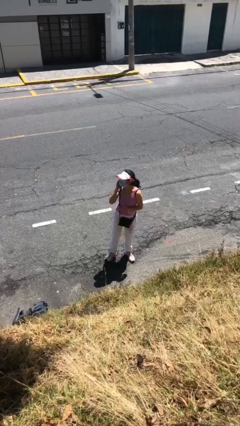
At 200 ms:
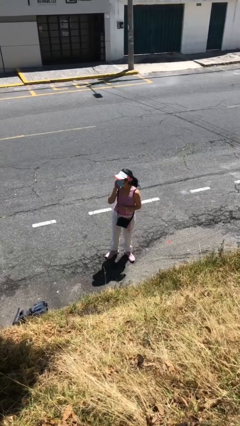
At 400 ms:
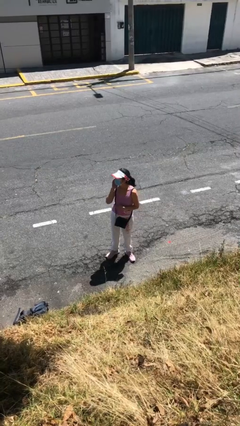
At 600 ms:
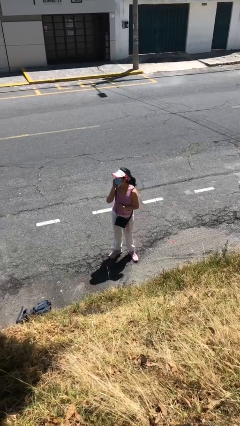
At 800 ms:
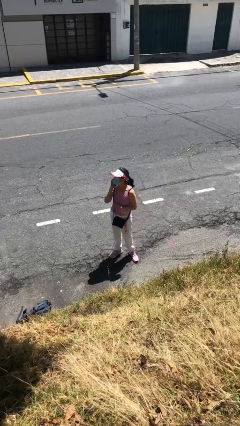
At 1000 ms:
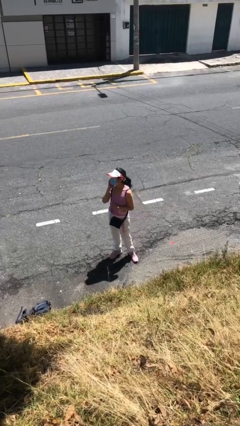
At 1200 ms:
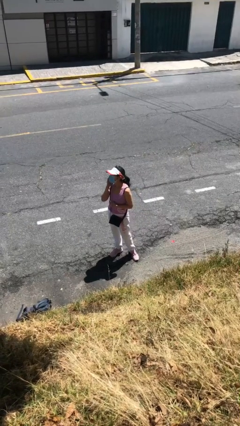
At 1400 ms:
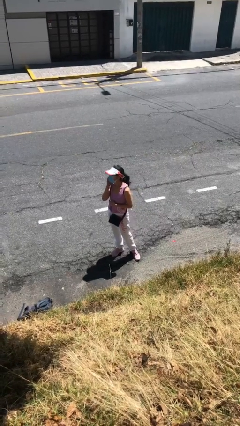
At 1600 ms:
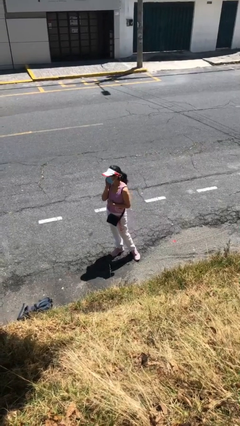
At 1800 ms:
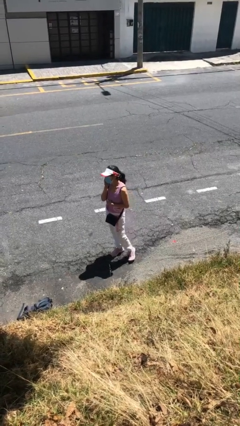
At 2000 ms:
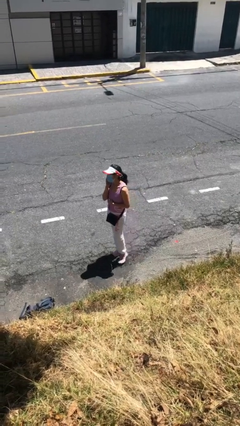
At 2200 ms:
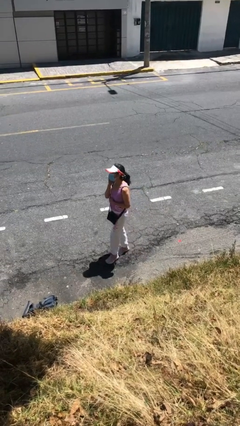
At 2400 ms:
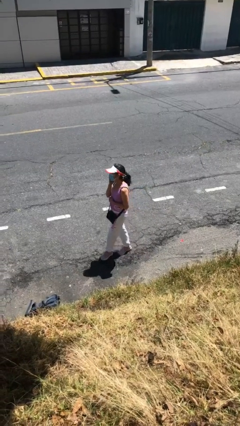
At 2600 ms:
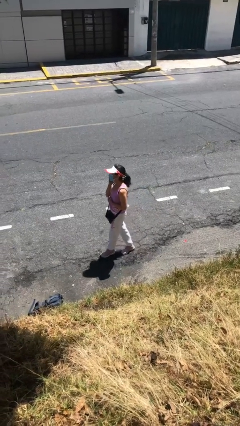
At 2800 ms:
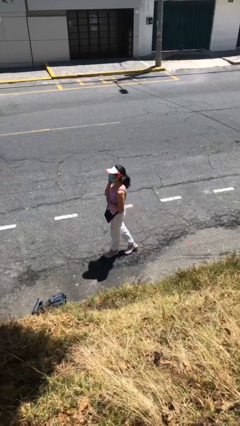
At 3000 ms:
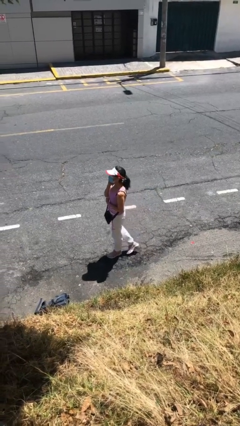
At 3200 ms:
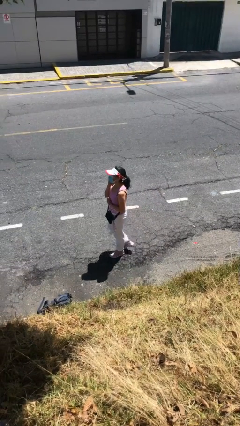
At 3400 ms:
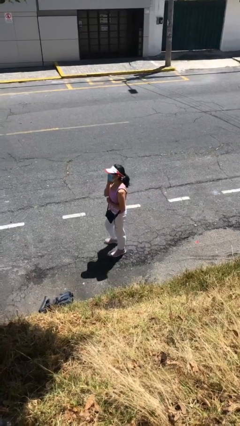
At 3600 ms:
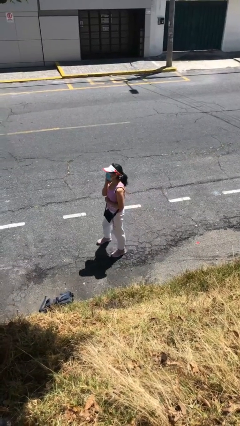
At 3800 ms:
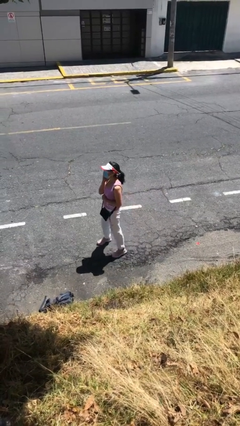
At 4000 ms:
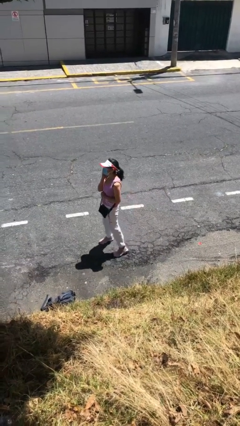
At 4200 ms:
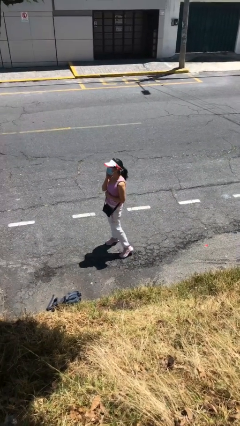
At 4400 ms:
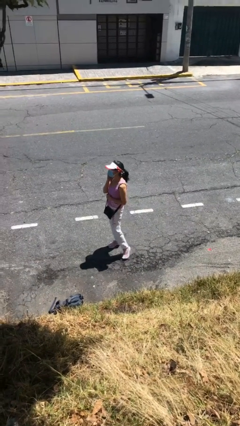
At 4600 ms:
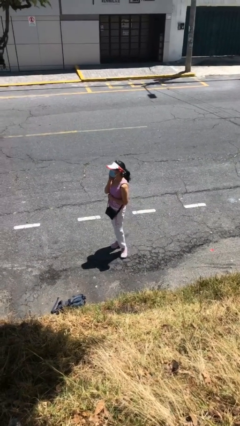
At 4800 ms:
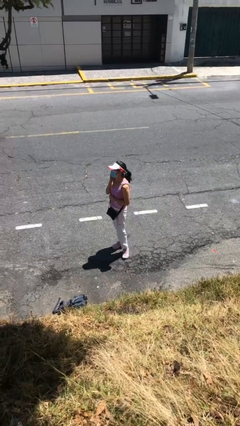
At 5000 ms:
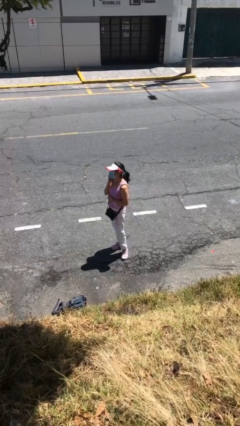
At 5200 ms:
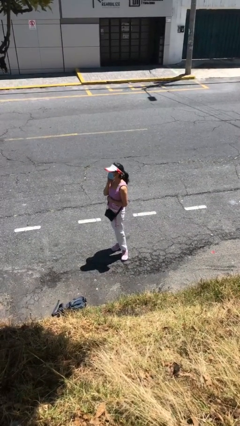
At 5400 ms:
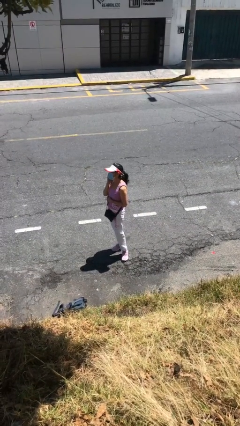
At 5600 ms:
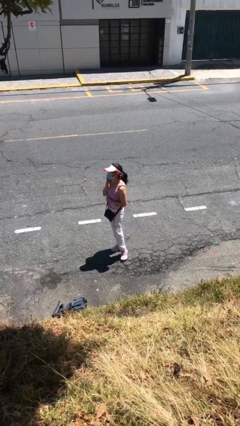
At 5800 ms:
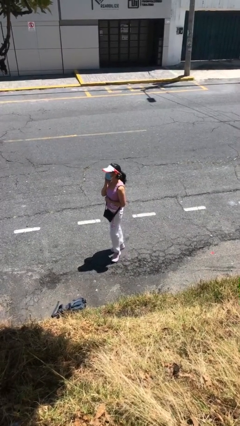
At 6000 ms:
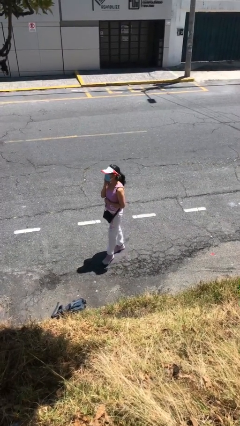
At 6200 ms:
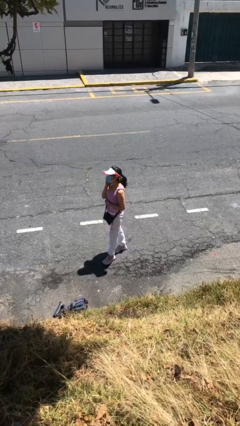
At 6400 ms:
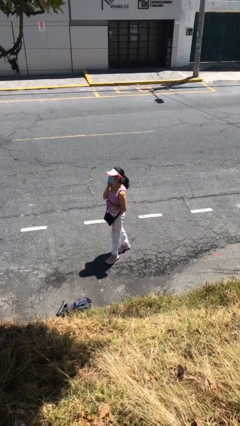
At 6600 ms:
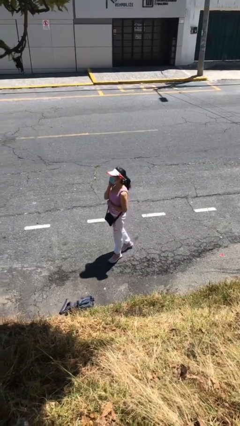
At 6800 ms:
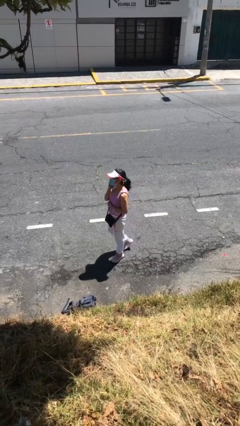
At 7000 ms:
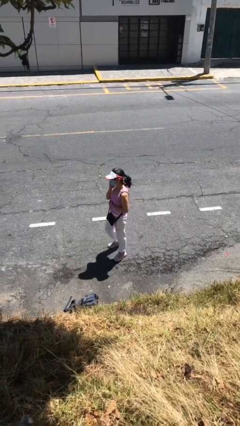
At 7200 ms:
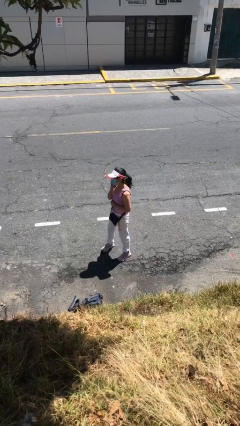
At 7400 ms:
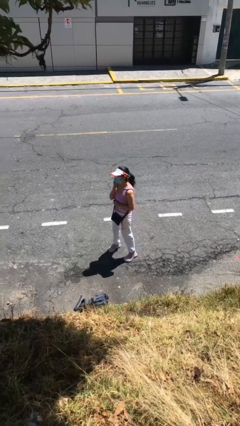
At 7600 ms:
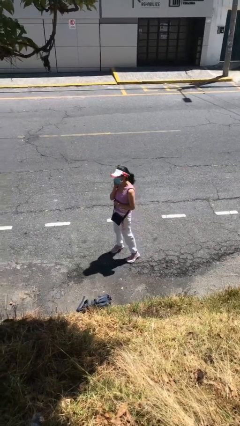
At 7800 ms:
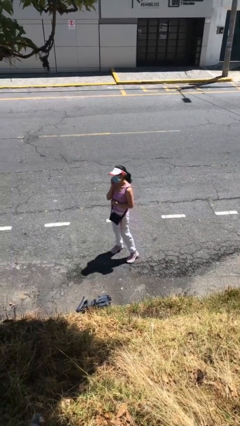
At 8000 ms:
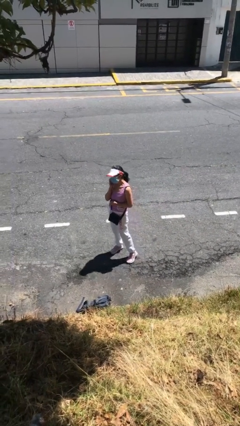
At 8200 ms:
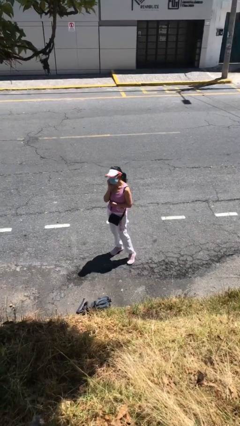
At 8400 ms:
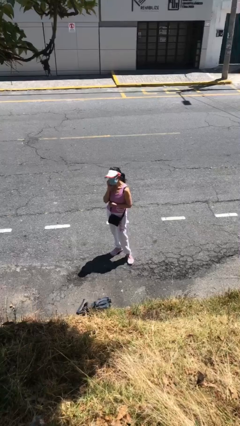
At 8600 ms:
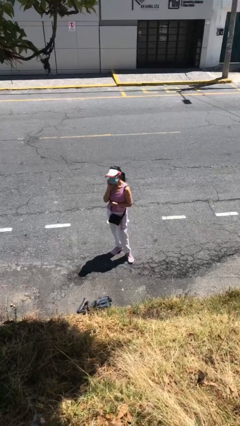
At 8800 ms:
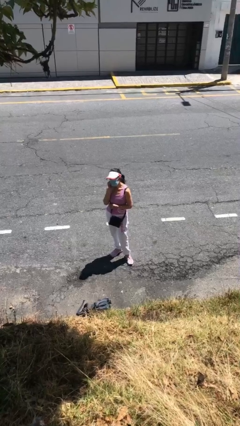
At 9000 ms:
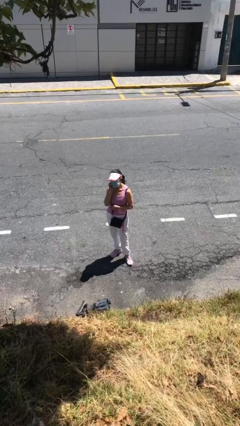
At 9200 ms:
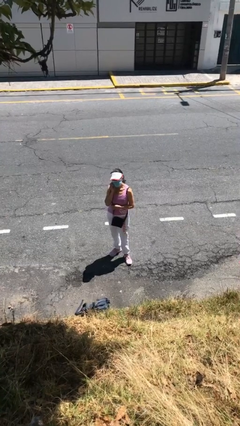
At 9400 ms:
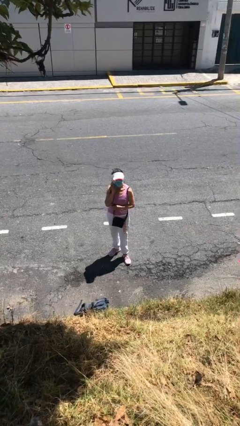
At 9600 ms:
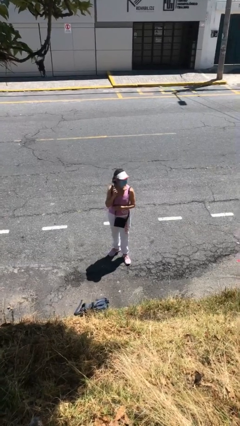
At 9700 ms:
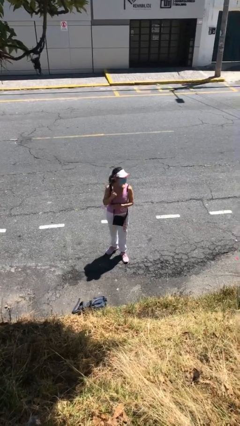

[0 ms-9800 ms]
person talks on phone

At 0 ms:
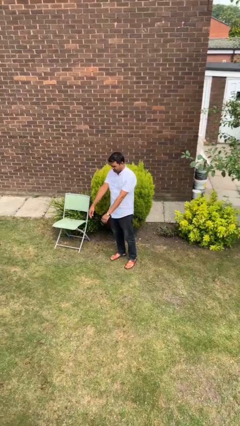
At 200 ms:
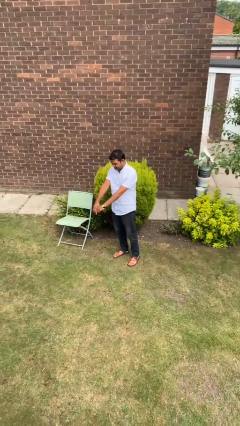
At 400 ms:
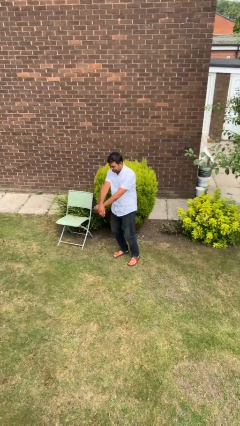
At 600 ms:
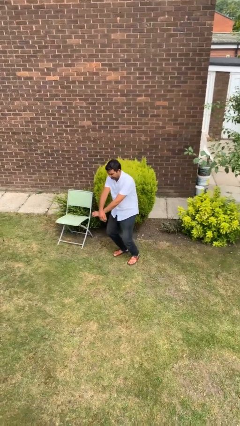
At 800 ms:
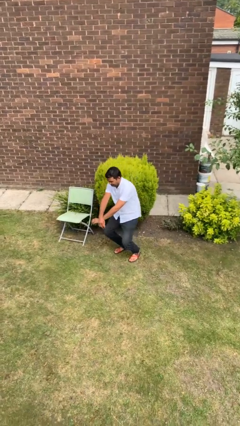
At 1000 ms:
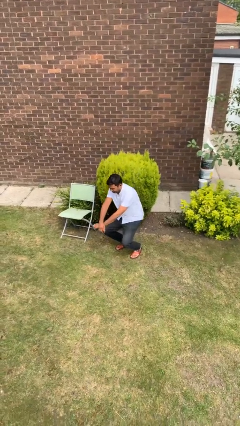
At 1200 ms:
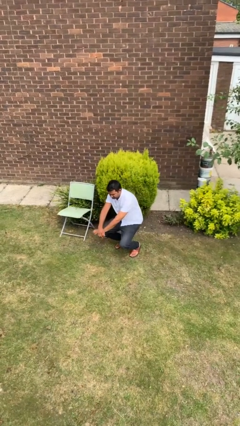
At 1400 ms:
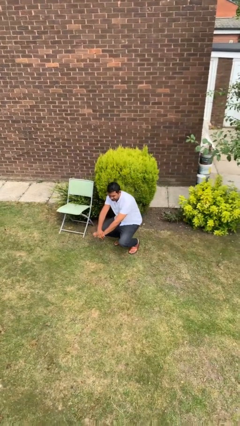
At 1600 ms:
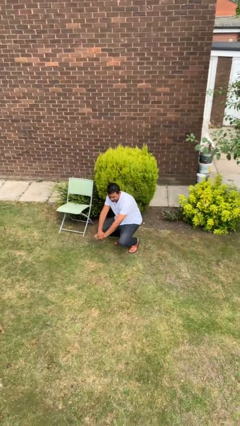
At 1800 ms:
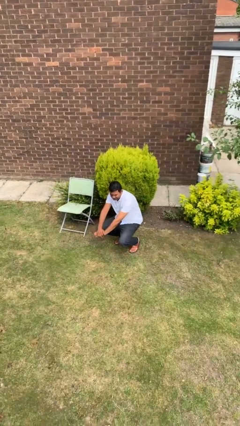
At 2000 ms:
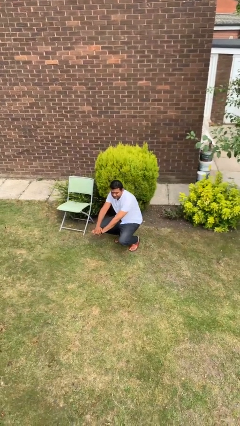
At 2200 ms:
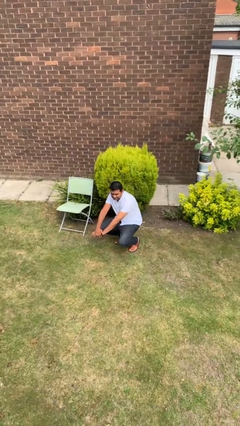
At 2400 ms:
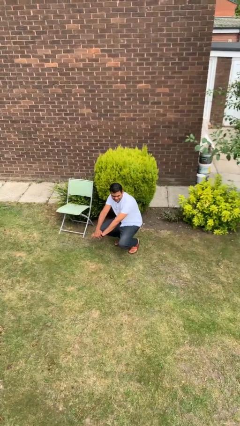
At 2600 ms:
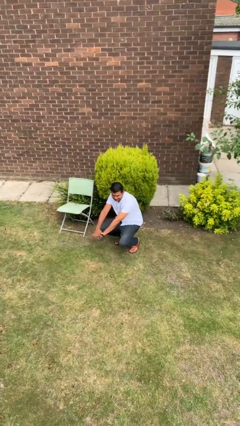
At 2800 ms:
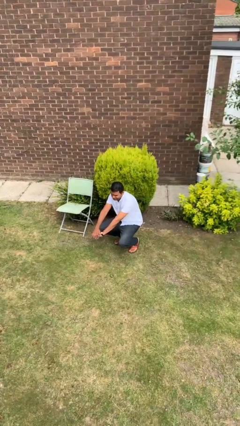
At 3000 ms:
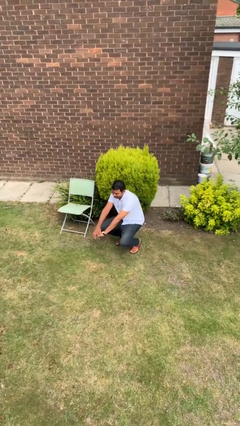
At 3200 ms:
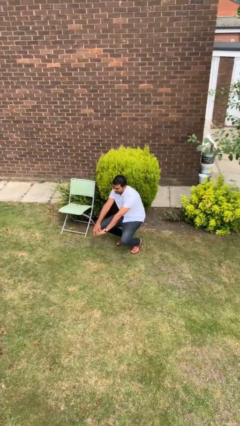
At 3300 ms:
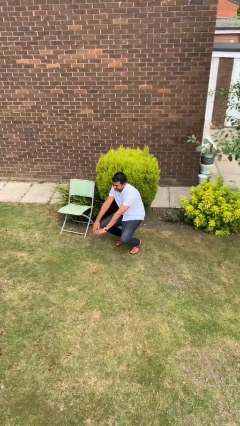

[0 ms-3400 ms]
person squats

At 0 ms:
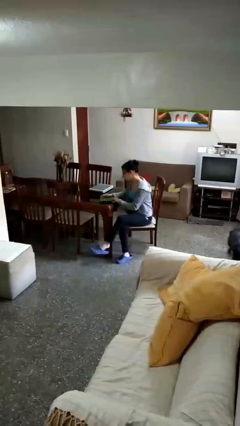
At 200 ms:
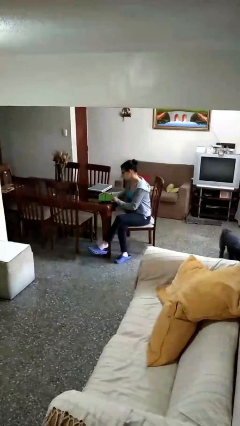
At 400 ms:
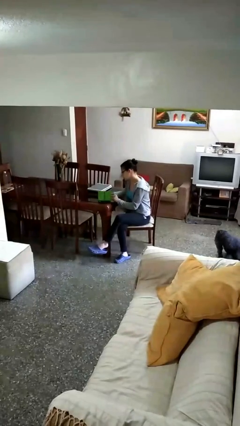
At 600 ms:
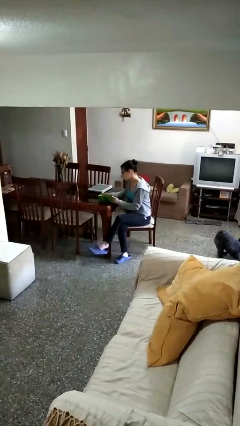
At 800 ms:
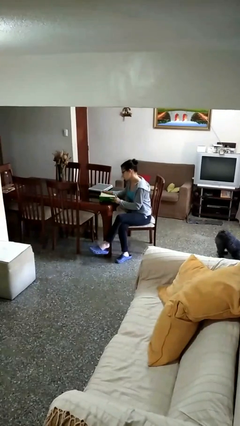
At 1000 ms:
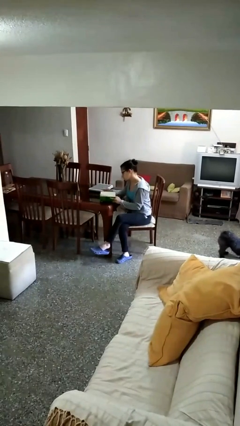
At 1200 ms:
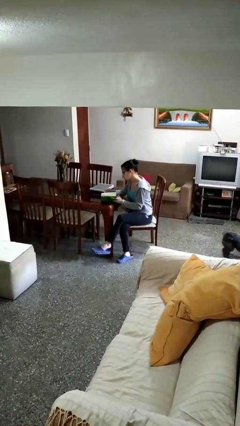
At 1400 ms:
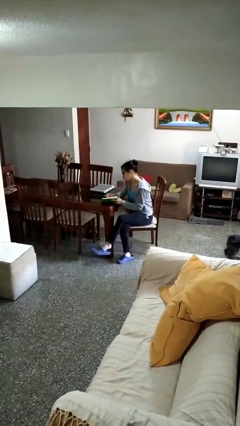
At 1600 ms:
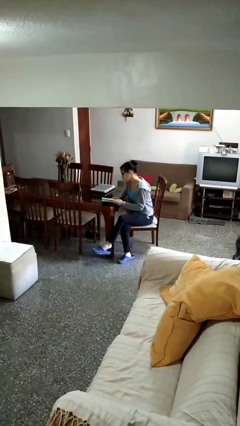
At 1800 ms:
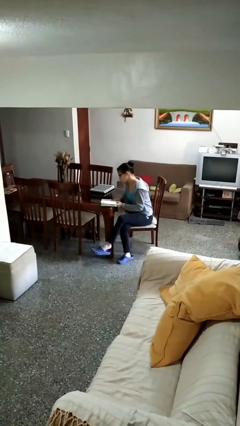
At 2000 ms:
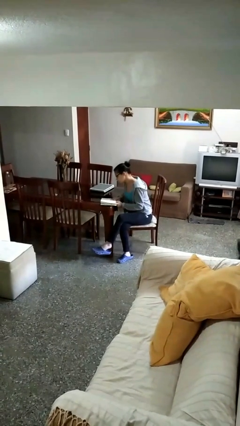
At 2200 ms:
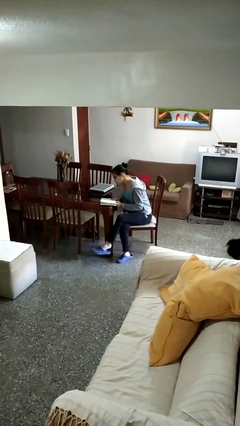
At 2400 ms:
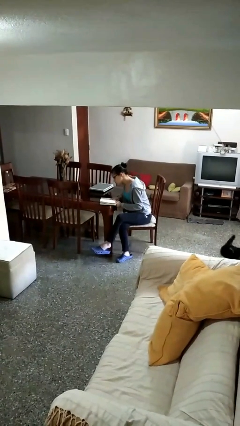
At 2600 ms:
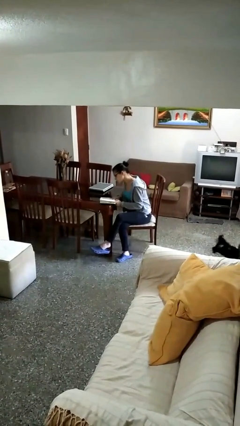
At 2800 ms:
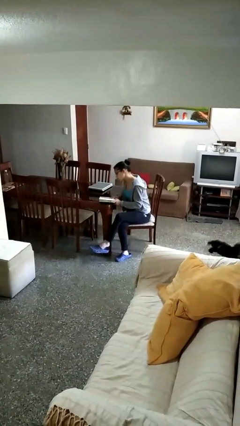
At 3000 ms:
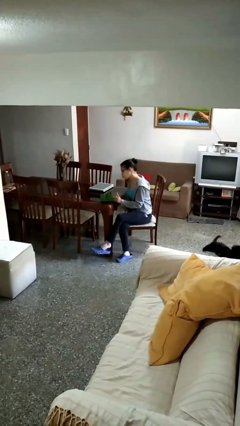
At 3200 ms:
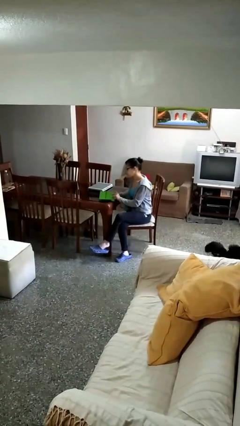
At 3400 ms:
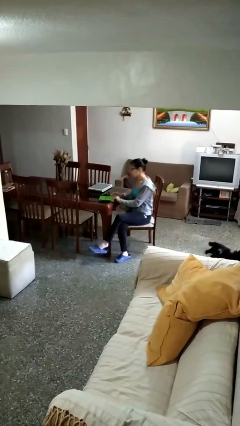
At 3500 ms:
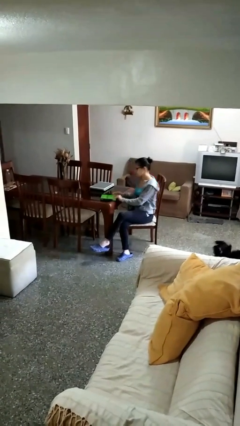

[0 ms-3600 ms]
person reads document

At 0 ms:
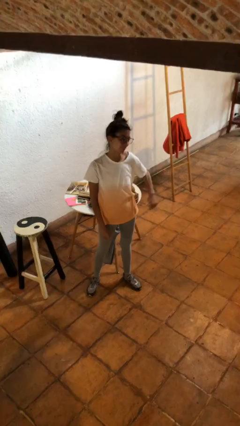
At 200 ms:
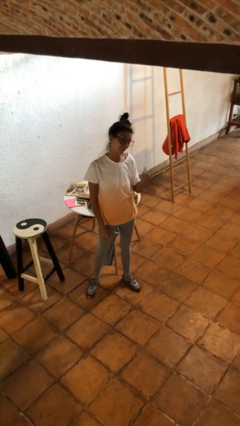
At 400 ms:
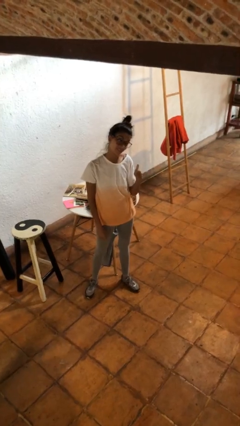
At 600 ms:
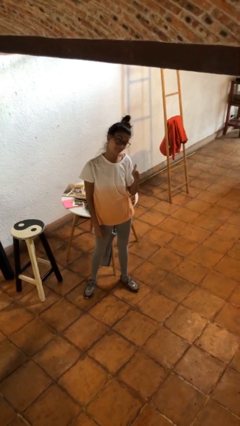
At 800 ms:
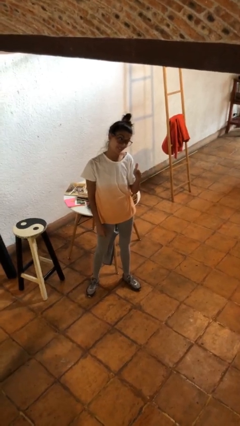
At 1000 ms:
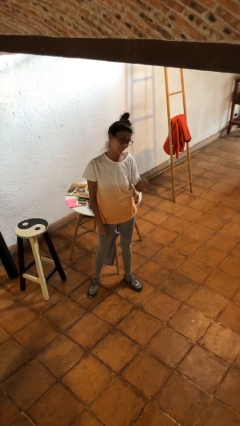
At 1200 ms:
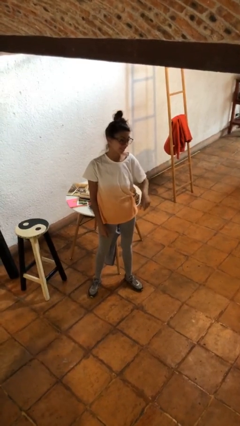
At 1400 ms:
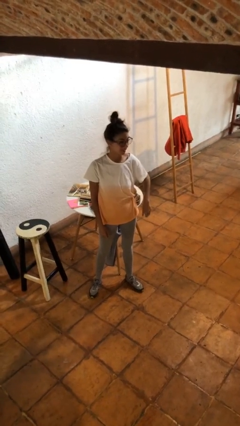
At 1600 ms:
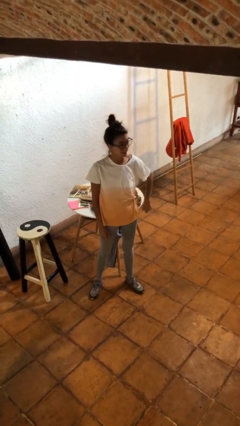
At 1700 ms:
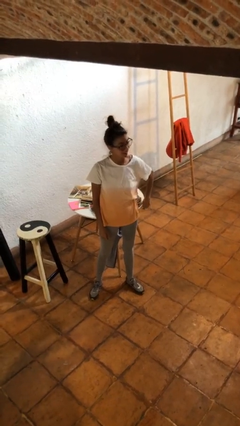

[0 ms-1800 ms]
person gestures thumbs up
